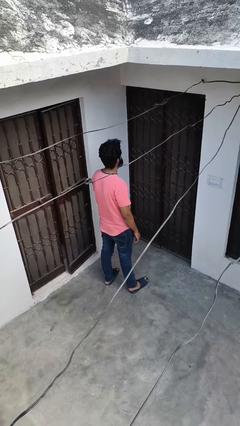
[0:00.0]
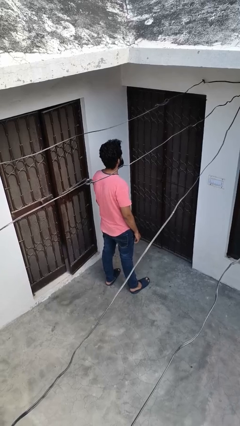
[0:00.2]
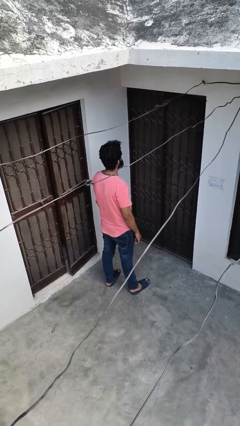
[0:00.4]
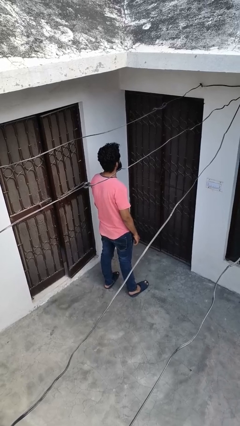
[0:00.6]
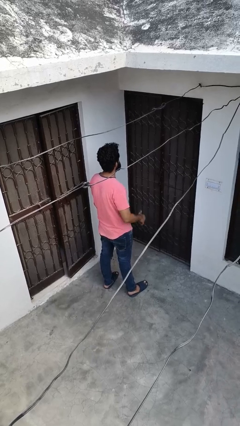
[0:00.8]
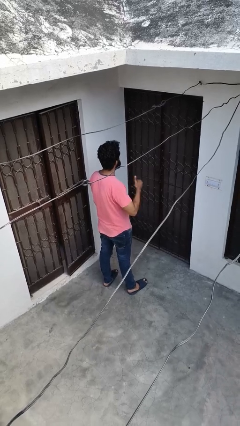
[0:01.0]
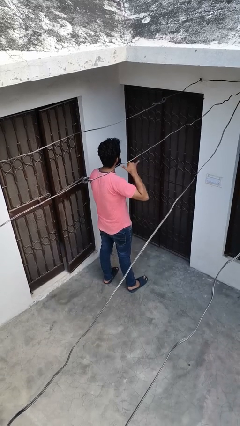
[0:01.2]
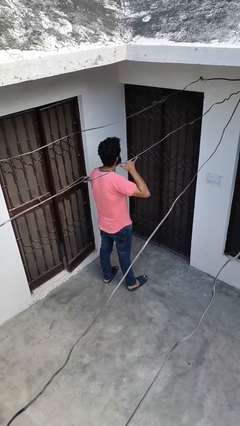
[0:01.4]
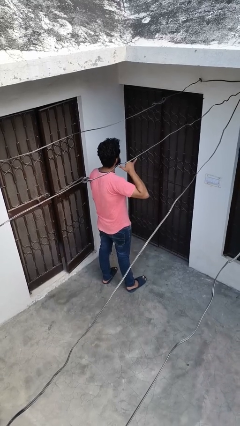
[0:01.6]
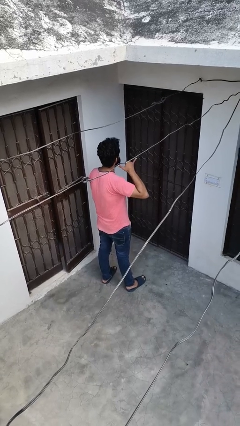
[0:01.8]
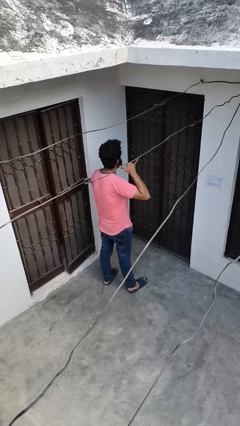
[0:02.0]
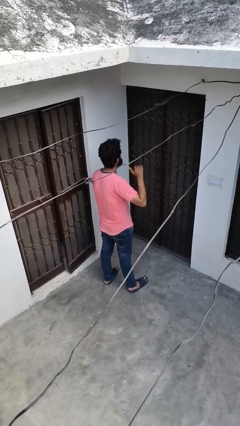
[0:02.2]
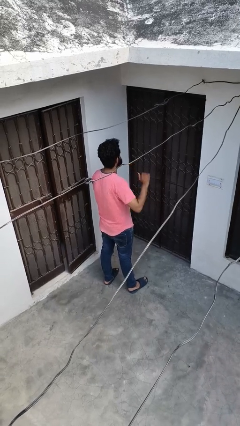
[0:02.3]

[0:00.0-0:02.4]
person gestures call me

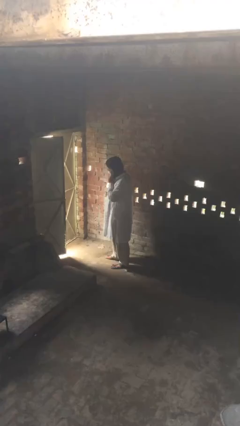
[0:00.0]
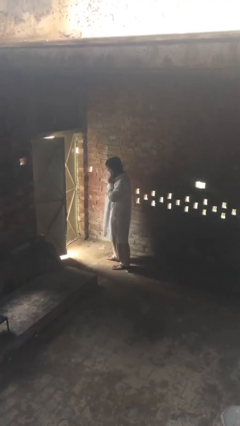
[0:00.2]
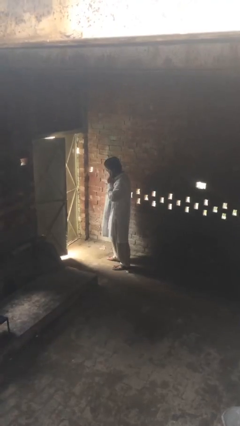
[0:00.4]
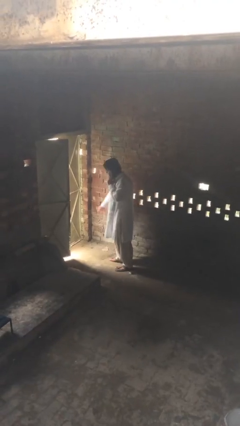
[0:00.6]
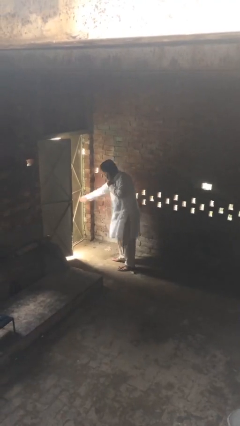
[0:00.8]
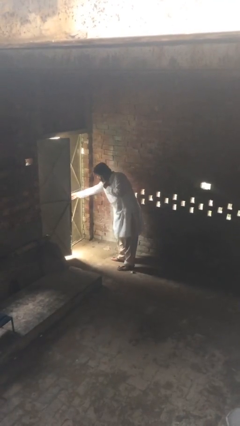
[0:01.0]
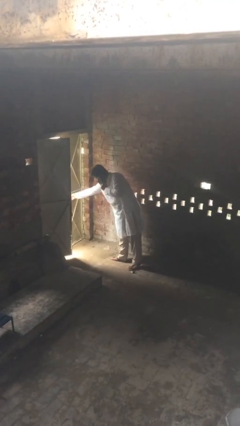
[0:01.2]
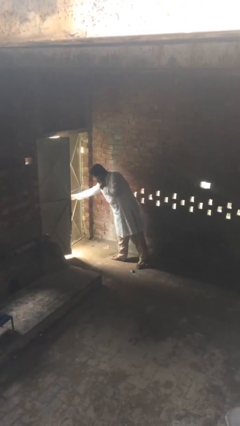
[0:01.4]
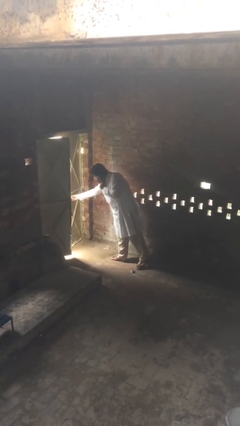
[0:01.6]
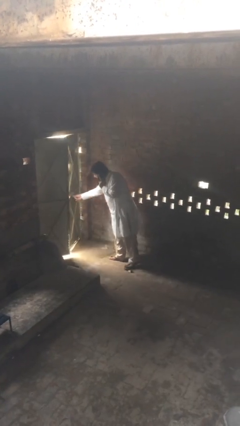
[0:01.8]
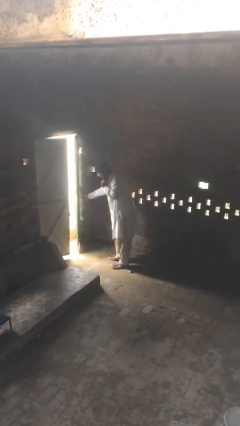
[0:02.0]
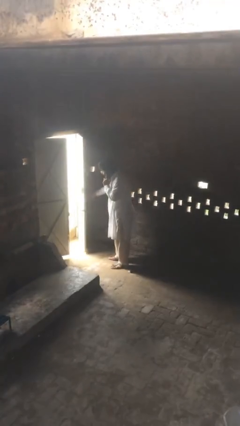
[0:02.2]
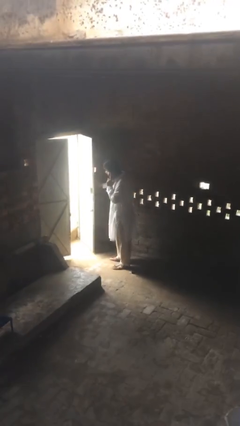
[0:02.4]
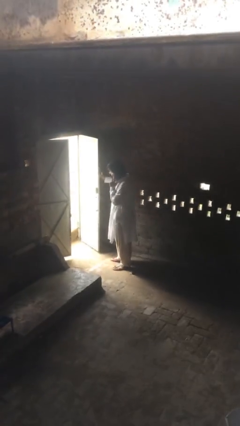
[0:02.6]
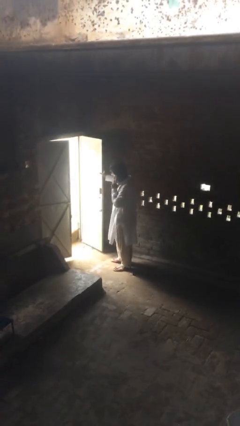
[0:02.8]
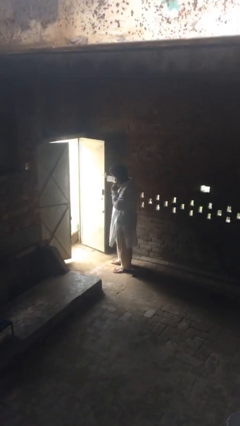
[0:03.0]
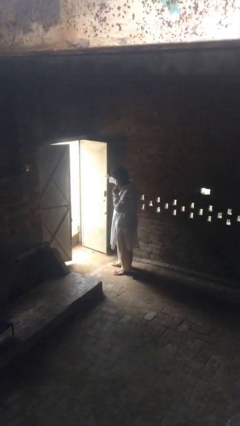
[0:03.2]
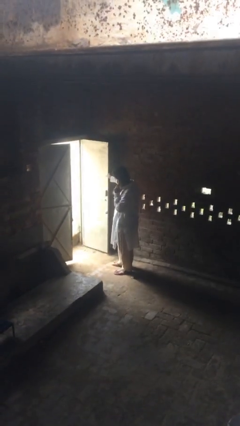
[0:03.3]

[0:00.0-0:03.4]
person opens facility door

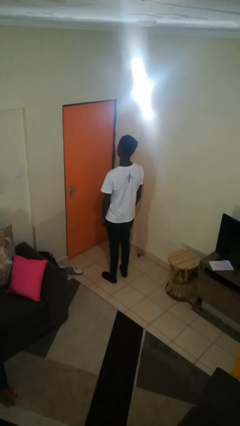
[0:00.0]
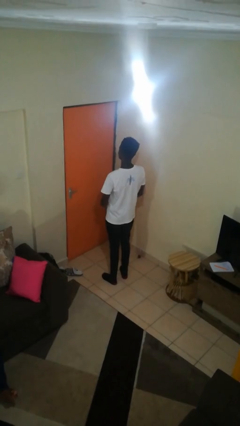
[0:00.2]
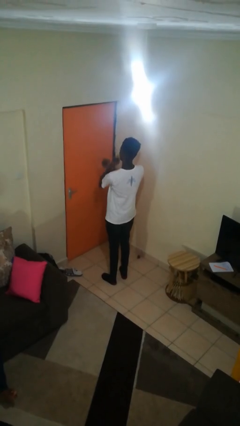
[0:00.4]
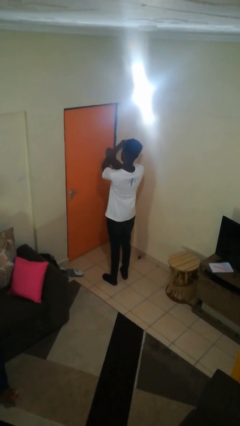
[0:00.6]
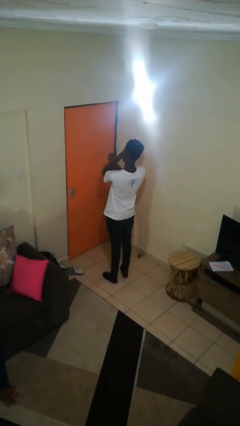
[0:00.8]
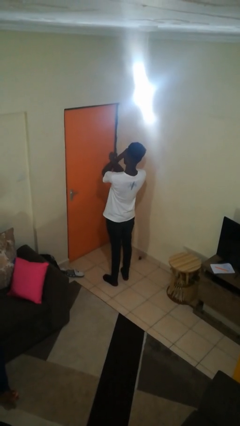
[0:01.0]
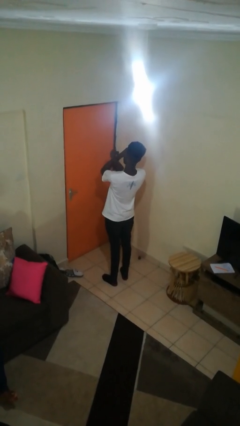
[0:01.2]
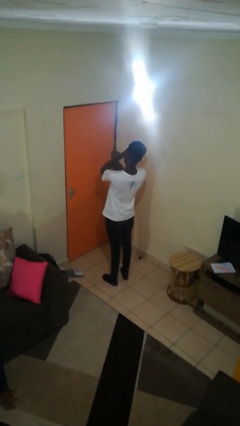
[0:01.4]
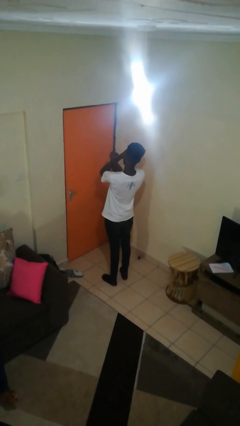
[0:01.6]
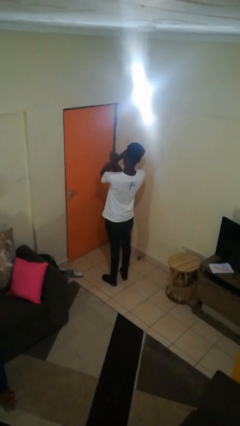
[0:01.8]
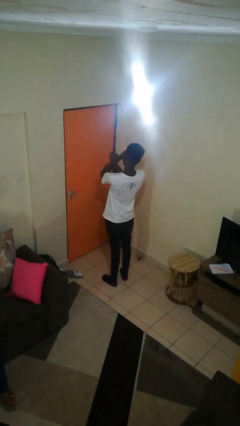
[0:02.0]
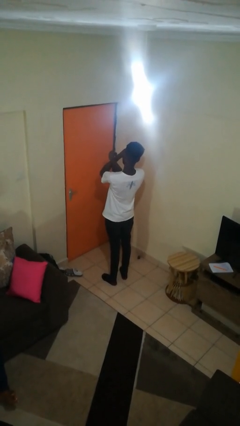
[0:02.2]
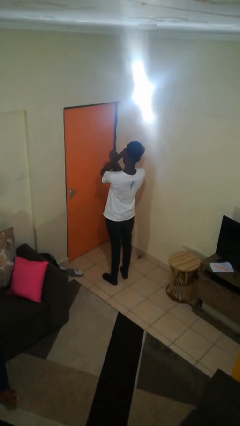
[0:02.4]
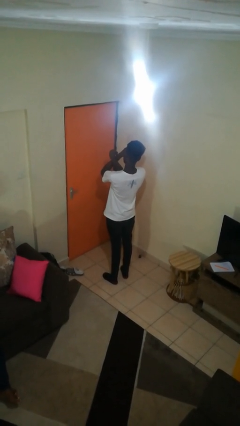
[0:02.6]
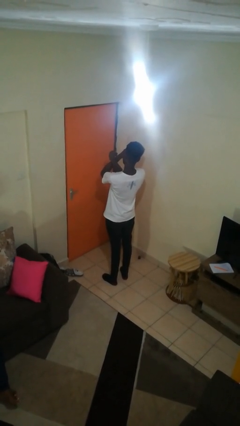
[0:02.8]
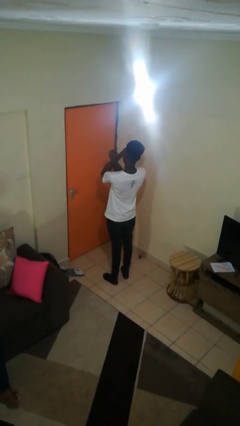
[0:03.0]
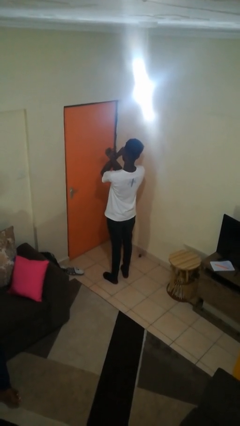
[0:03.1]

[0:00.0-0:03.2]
person gestures arms x

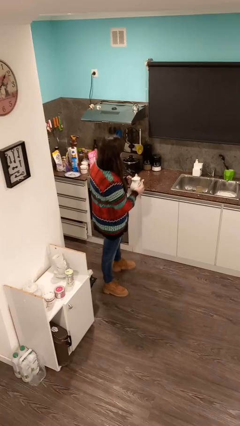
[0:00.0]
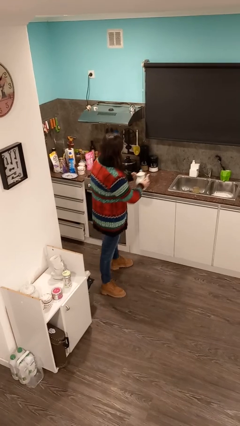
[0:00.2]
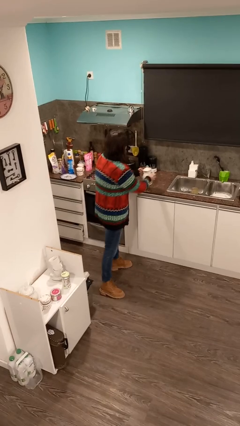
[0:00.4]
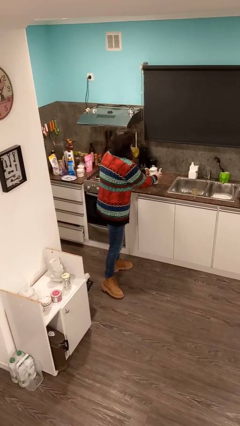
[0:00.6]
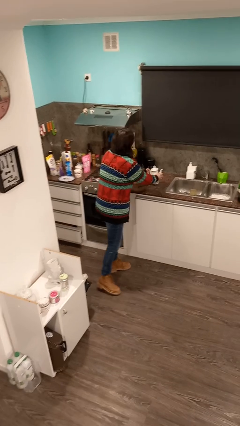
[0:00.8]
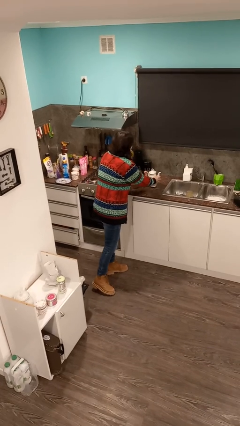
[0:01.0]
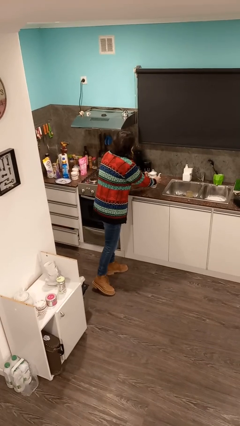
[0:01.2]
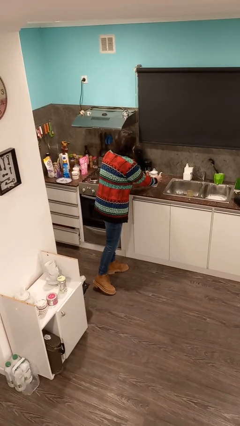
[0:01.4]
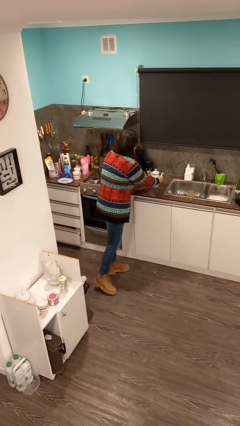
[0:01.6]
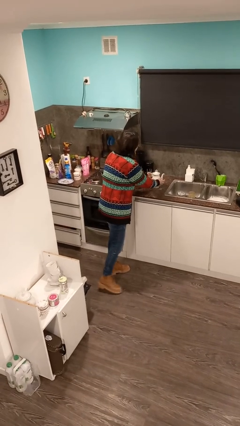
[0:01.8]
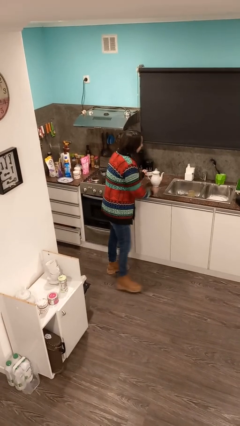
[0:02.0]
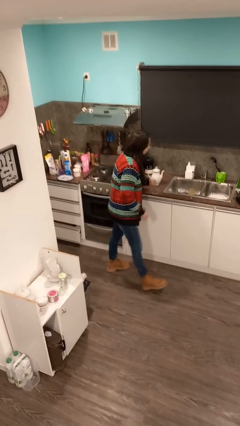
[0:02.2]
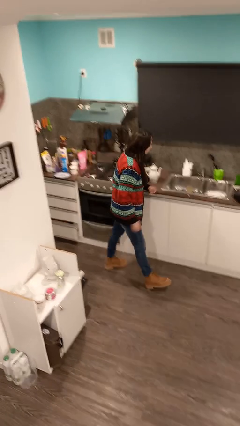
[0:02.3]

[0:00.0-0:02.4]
person puts down object on countertop

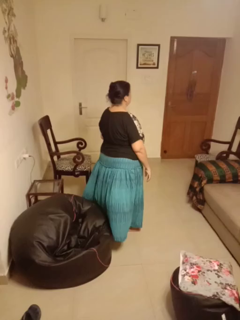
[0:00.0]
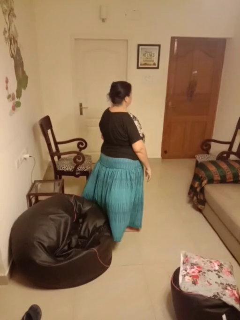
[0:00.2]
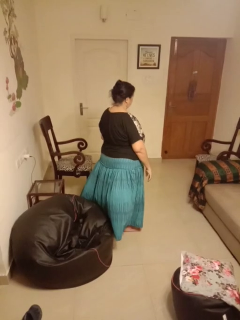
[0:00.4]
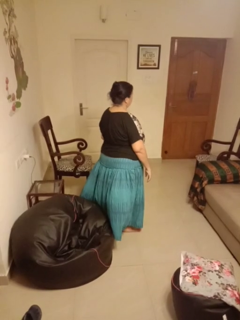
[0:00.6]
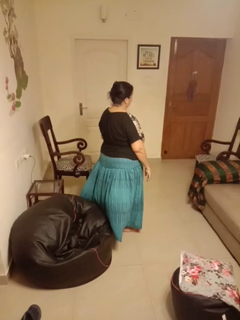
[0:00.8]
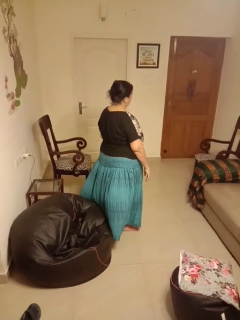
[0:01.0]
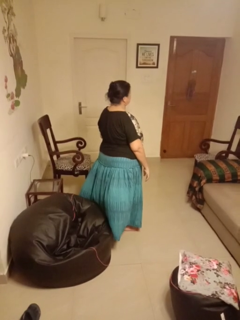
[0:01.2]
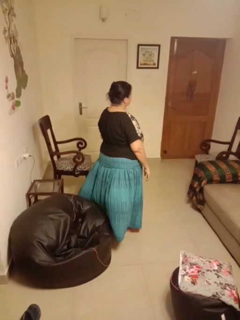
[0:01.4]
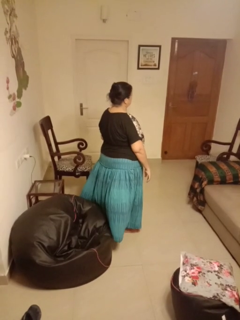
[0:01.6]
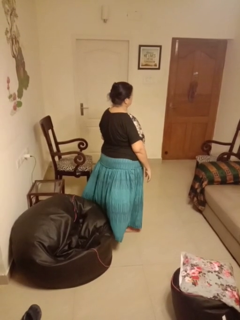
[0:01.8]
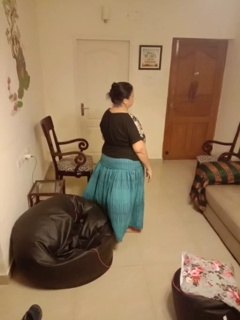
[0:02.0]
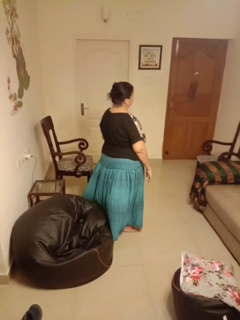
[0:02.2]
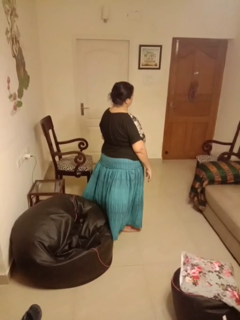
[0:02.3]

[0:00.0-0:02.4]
person nods head

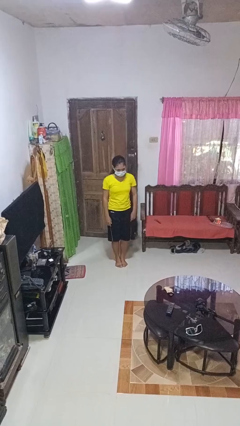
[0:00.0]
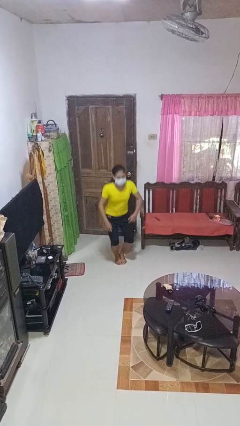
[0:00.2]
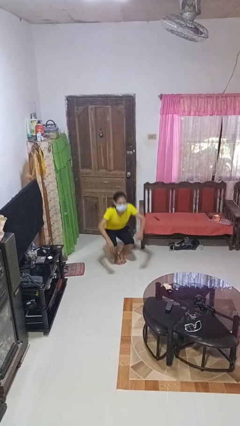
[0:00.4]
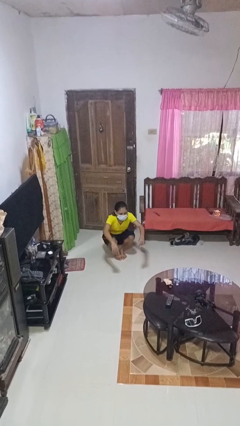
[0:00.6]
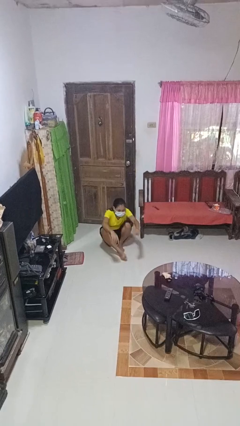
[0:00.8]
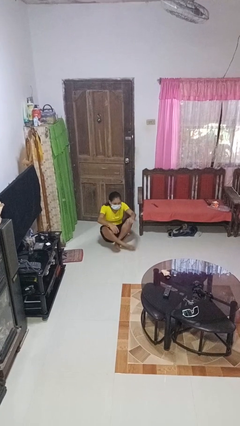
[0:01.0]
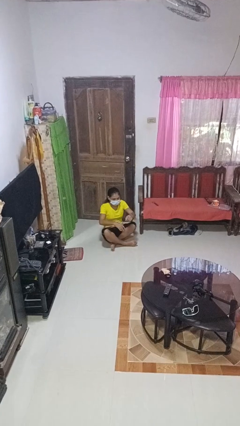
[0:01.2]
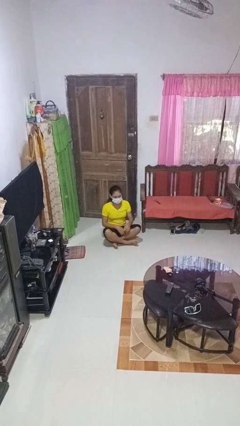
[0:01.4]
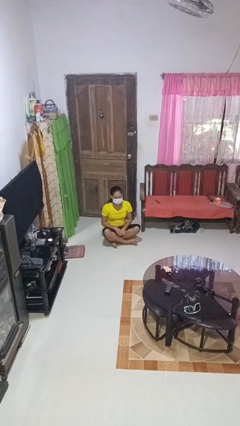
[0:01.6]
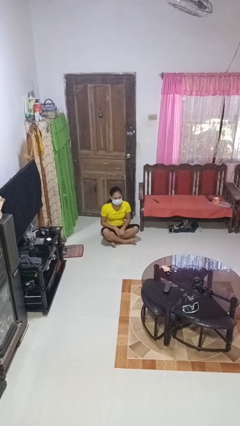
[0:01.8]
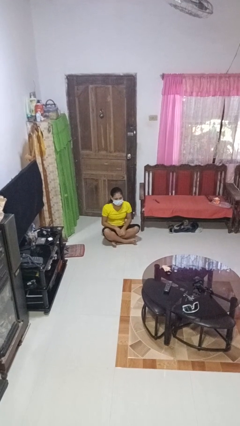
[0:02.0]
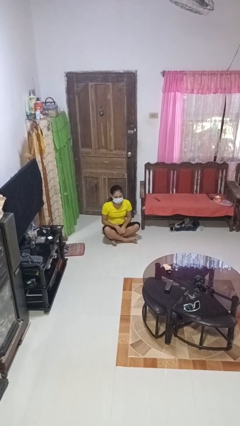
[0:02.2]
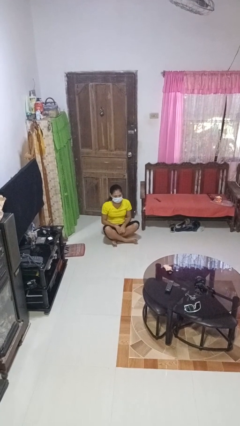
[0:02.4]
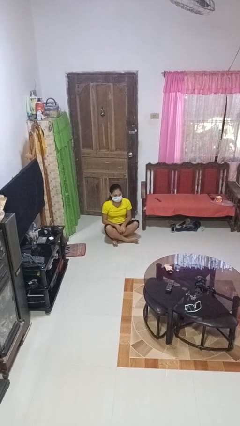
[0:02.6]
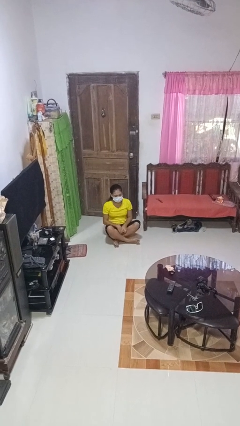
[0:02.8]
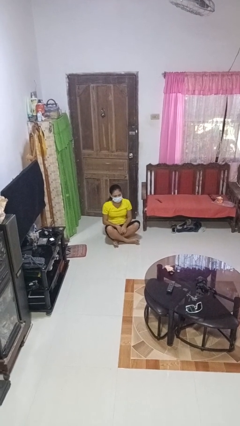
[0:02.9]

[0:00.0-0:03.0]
person sits crisscross

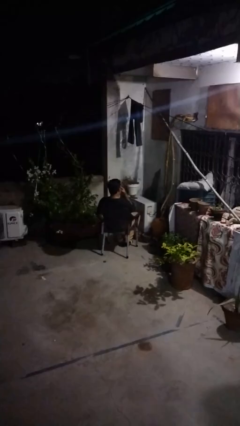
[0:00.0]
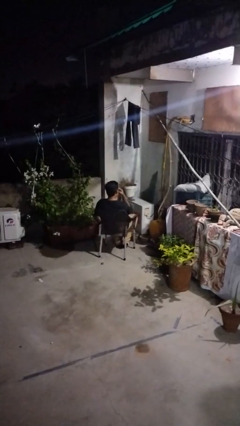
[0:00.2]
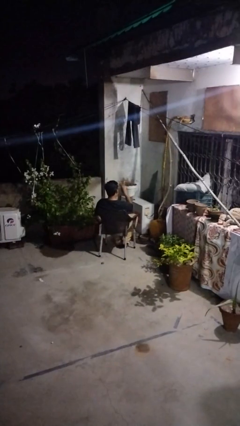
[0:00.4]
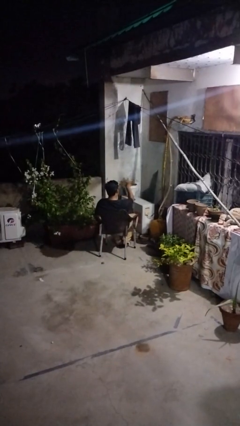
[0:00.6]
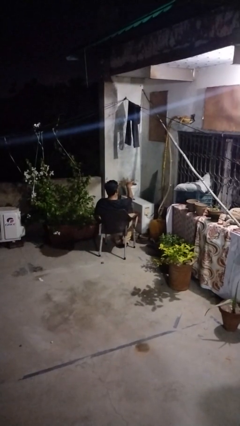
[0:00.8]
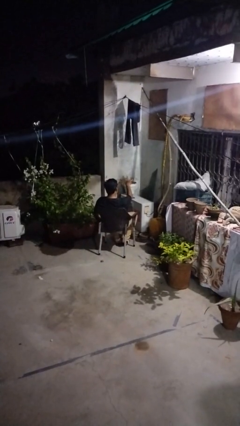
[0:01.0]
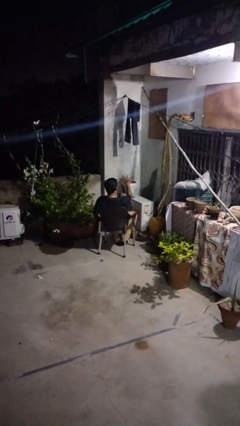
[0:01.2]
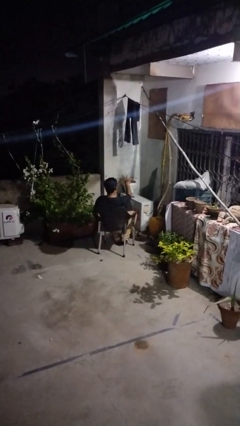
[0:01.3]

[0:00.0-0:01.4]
person gestures watch closely
